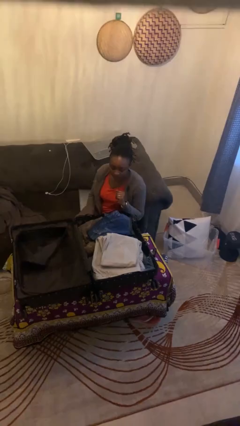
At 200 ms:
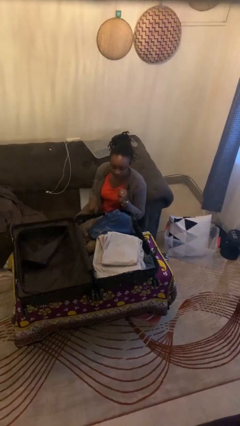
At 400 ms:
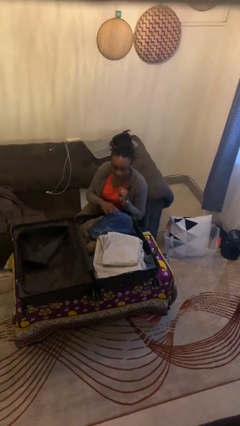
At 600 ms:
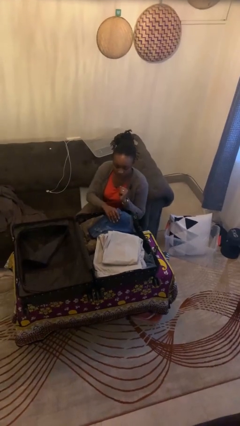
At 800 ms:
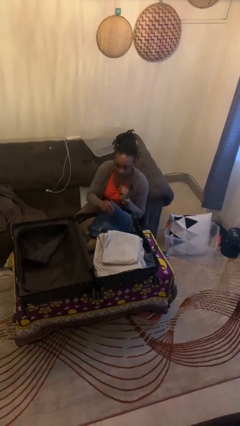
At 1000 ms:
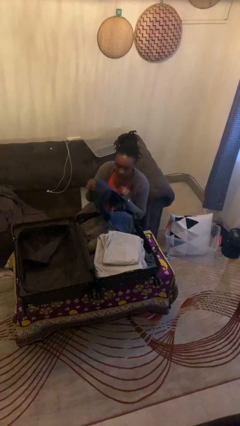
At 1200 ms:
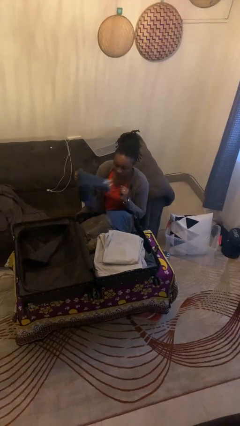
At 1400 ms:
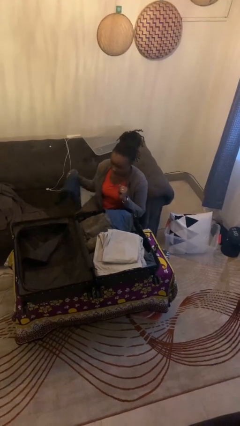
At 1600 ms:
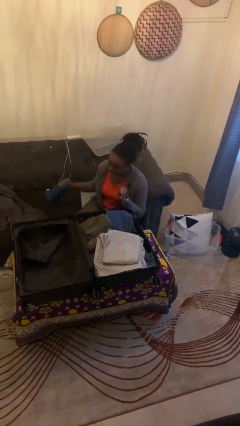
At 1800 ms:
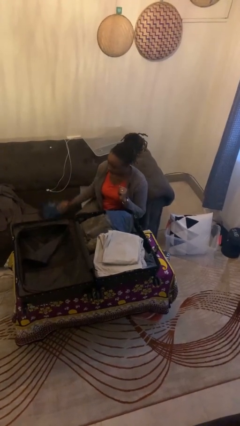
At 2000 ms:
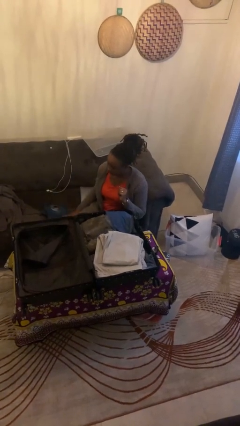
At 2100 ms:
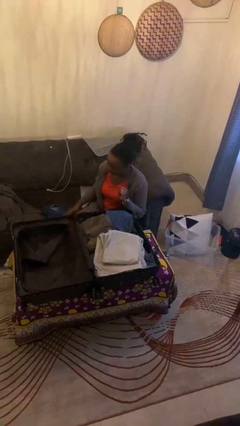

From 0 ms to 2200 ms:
person unloads clothes from suitcase

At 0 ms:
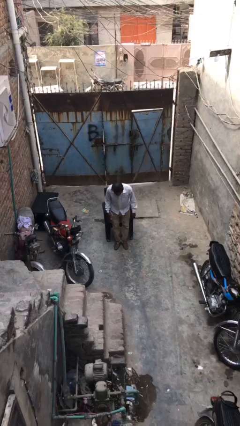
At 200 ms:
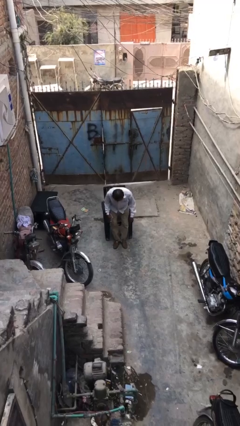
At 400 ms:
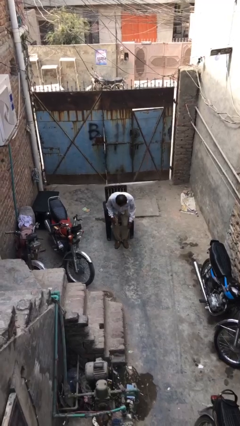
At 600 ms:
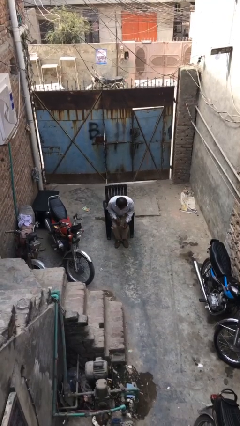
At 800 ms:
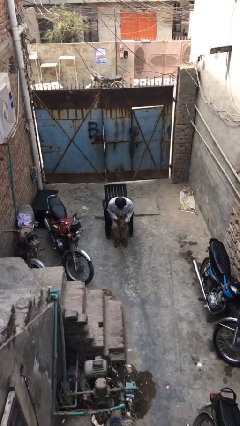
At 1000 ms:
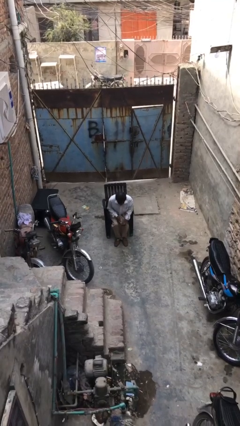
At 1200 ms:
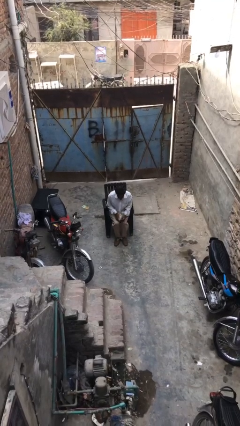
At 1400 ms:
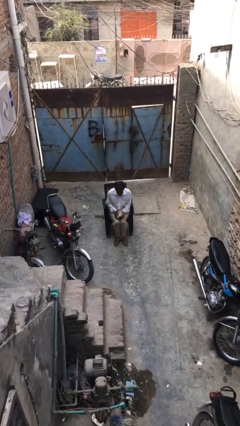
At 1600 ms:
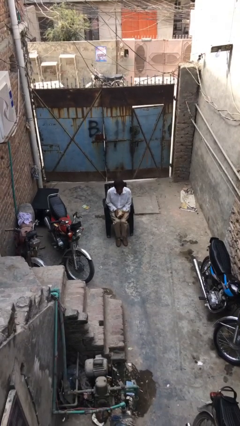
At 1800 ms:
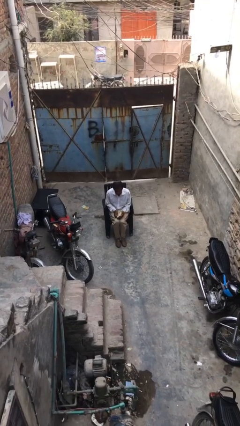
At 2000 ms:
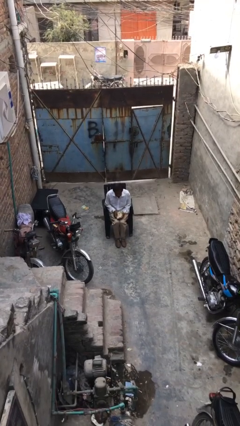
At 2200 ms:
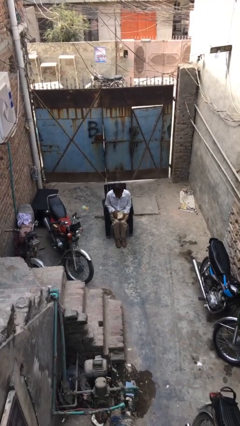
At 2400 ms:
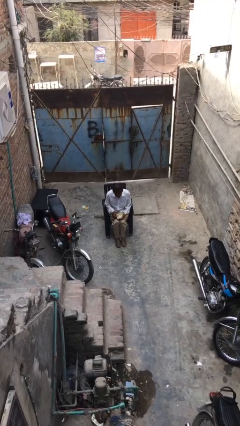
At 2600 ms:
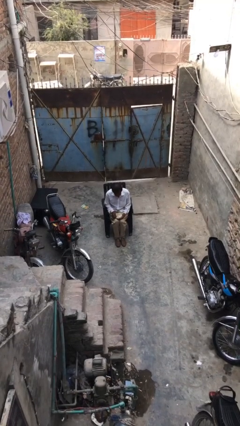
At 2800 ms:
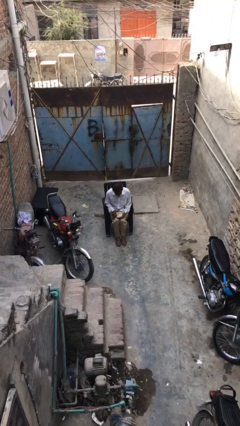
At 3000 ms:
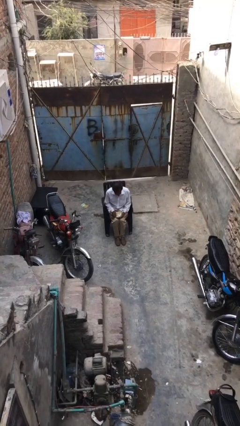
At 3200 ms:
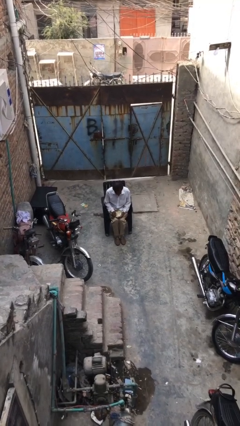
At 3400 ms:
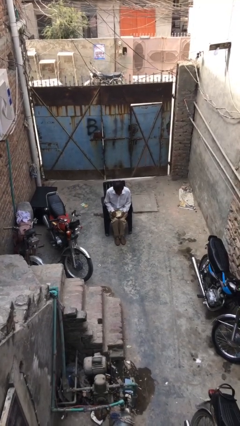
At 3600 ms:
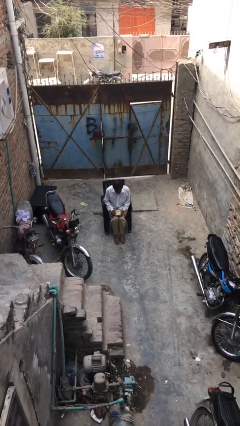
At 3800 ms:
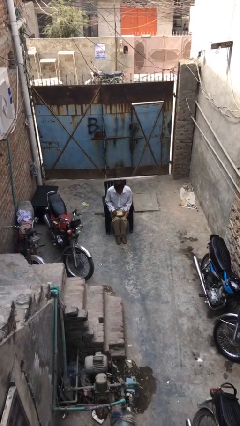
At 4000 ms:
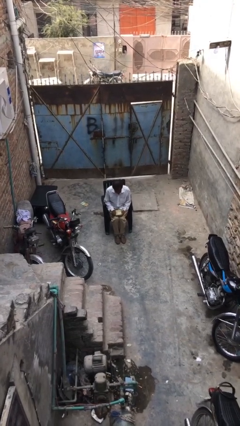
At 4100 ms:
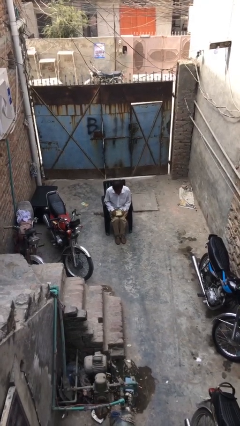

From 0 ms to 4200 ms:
person sits down

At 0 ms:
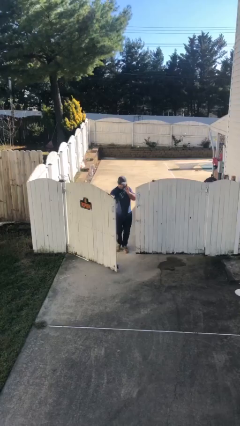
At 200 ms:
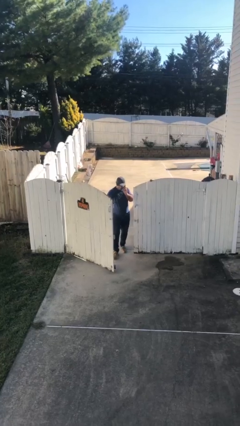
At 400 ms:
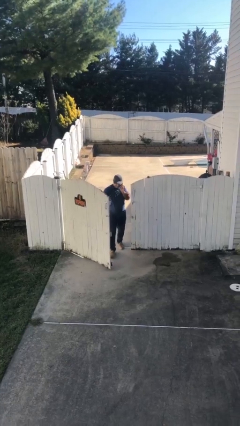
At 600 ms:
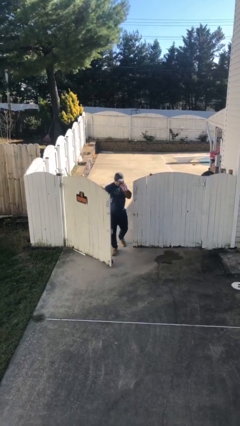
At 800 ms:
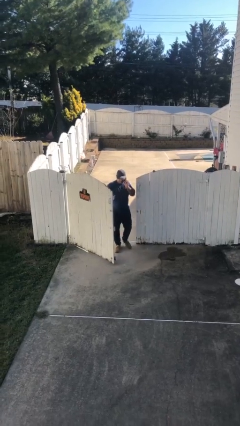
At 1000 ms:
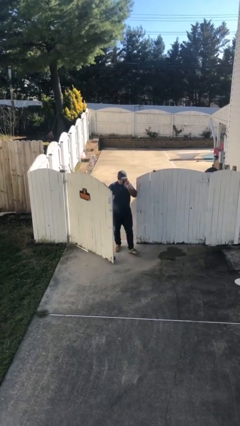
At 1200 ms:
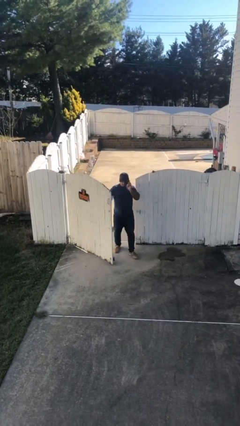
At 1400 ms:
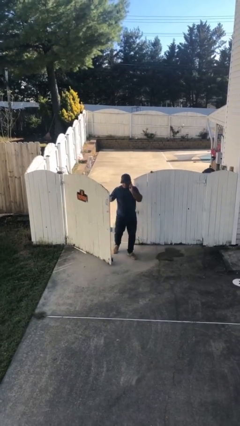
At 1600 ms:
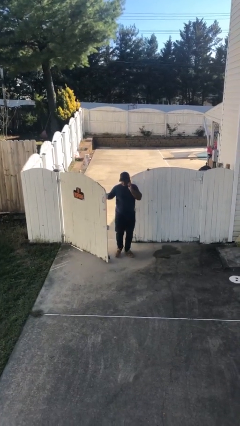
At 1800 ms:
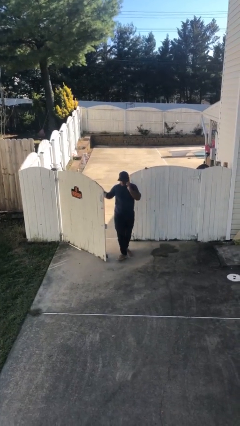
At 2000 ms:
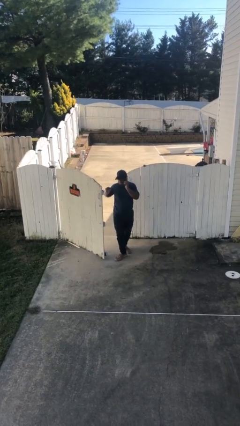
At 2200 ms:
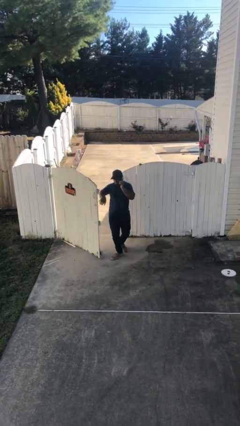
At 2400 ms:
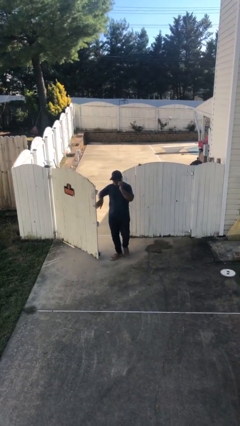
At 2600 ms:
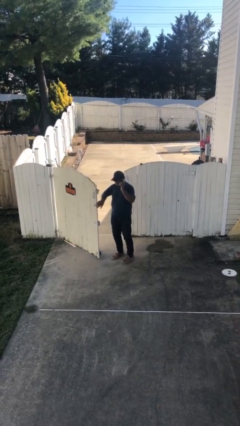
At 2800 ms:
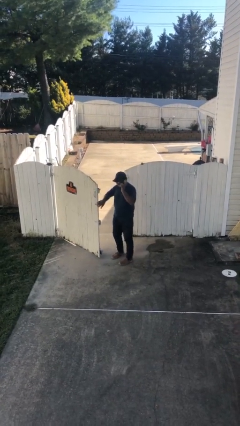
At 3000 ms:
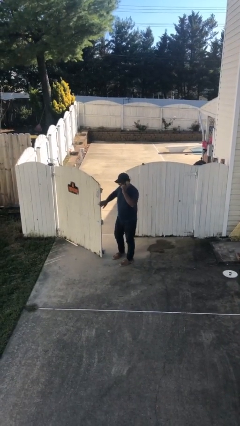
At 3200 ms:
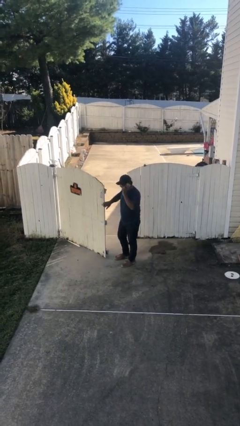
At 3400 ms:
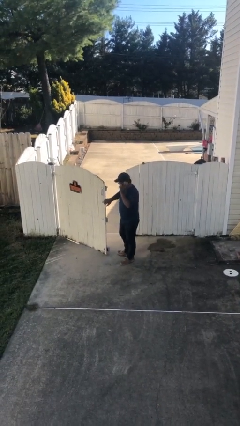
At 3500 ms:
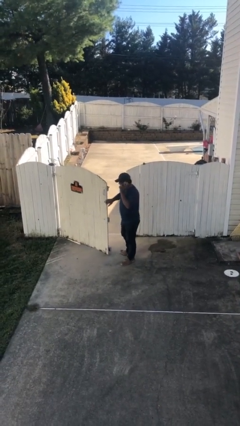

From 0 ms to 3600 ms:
person enters scene through structure

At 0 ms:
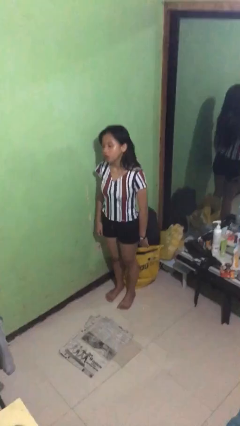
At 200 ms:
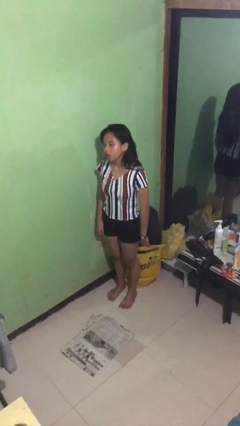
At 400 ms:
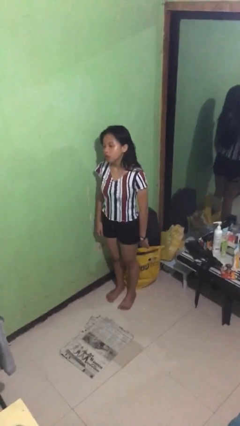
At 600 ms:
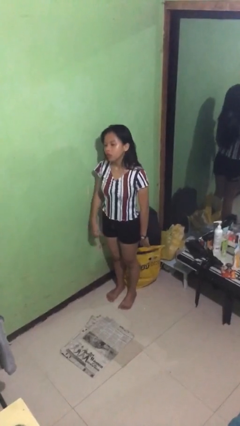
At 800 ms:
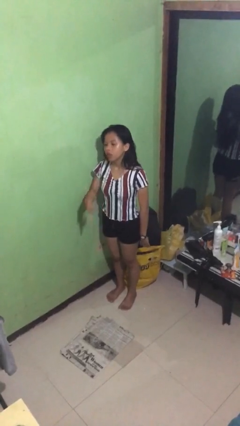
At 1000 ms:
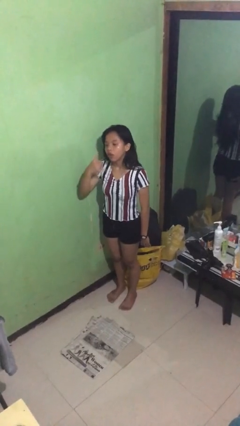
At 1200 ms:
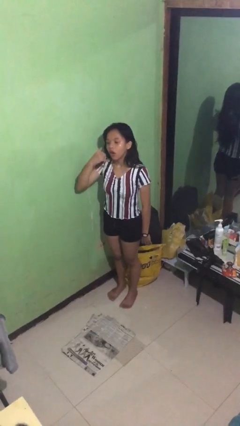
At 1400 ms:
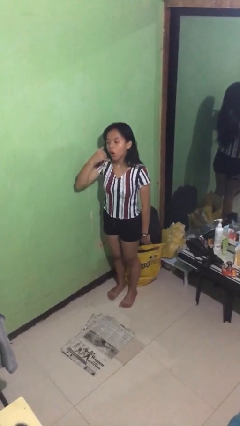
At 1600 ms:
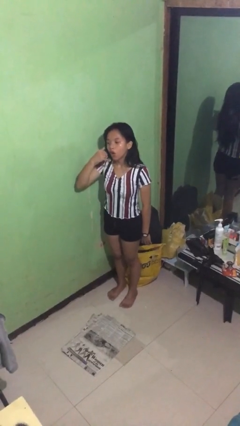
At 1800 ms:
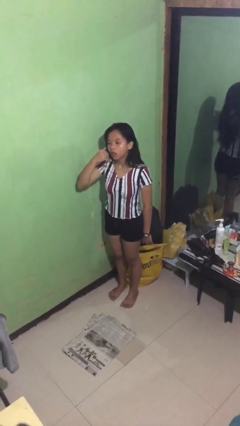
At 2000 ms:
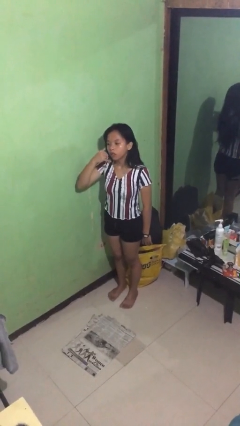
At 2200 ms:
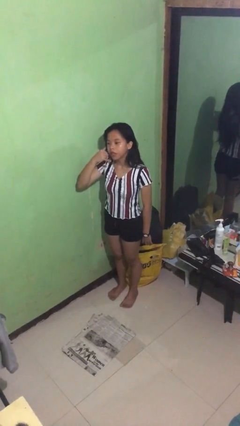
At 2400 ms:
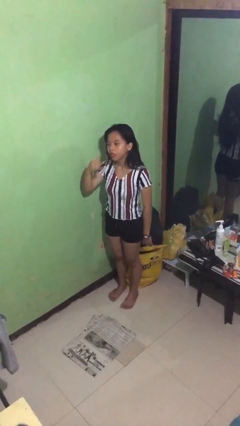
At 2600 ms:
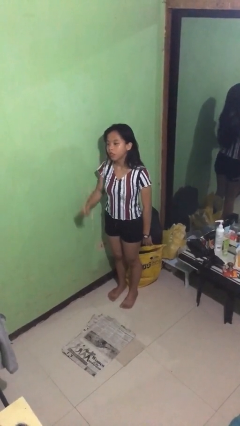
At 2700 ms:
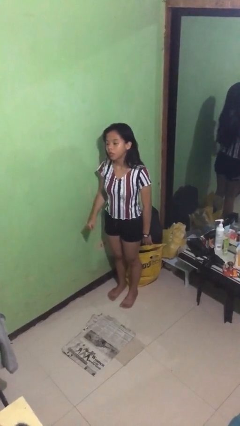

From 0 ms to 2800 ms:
person gestures call me

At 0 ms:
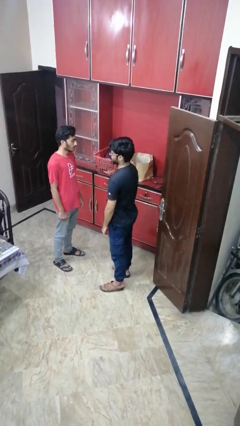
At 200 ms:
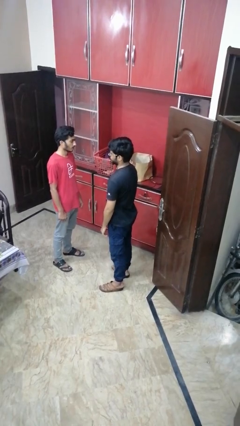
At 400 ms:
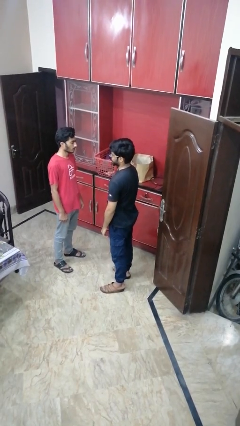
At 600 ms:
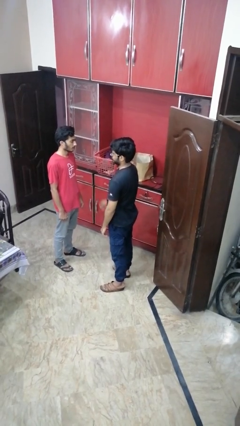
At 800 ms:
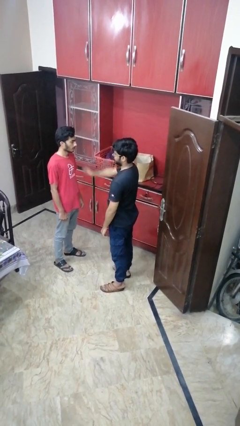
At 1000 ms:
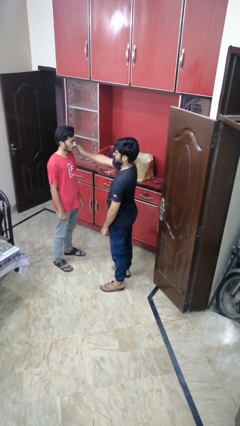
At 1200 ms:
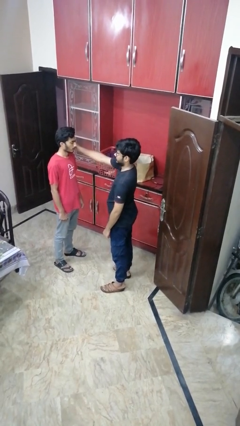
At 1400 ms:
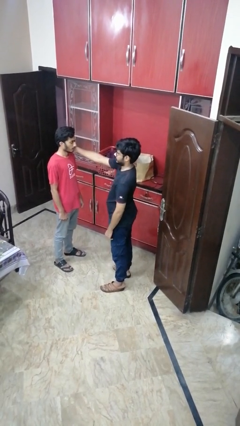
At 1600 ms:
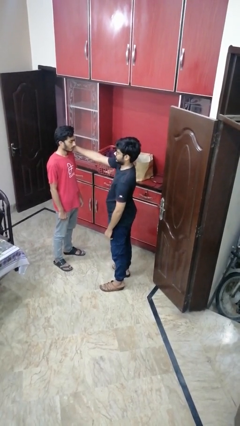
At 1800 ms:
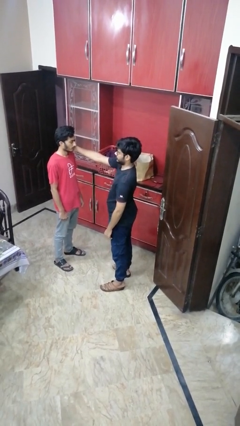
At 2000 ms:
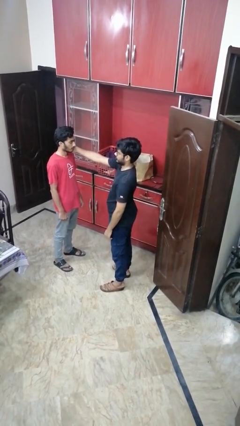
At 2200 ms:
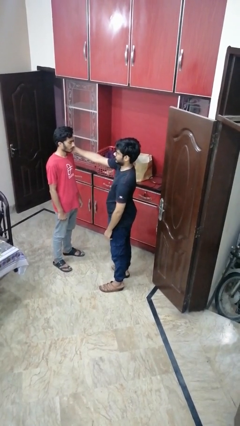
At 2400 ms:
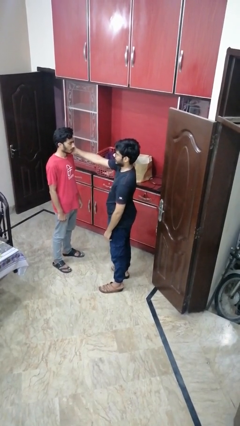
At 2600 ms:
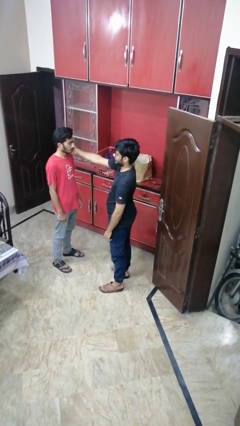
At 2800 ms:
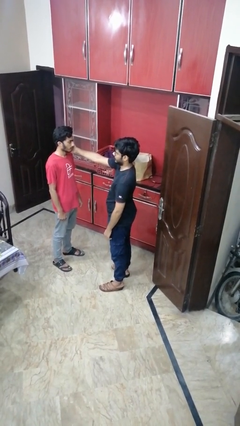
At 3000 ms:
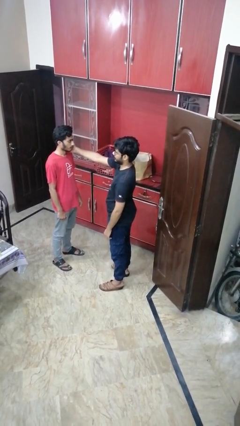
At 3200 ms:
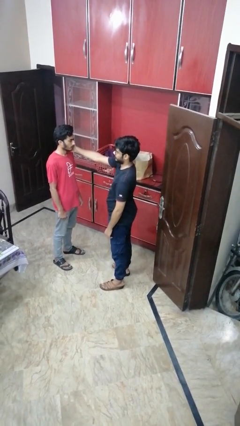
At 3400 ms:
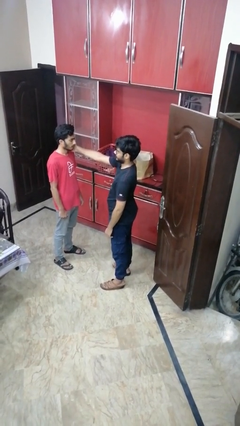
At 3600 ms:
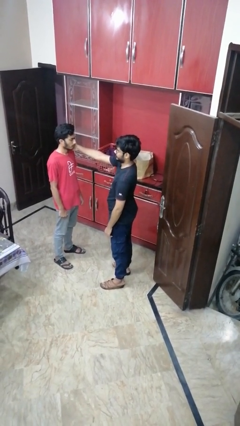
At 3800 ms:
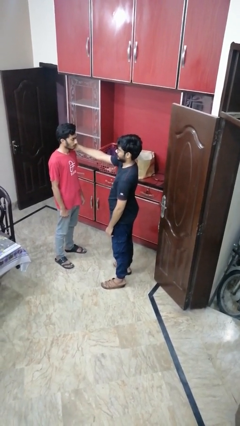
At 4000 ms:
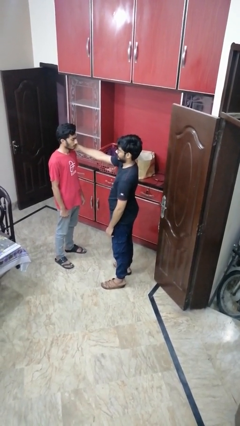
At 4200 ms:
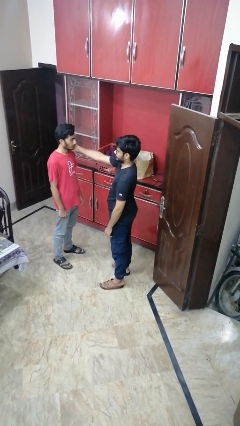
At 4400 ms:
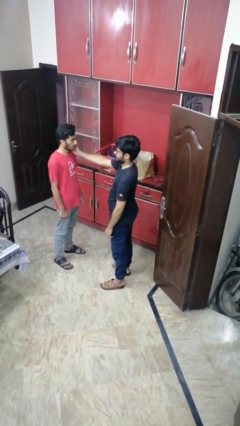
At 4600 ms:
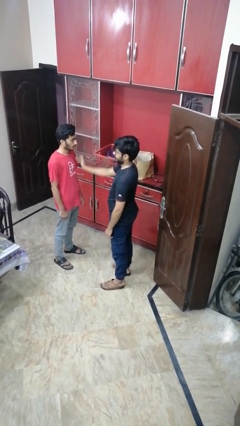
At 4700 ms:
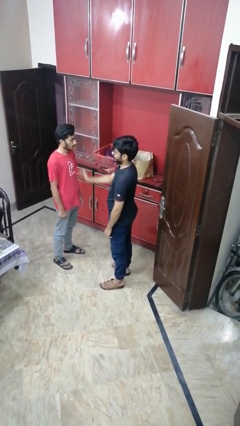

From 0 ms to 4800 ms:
person touches face of person
